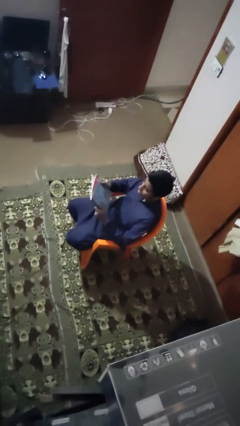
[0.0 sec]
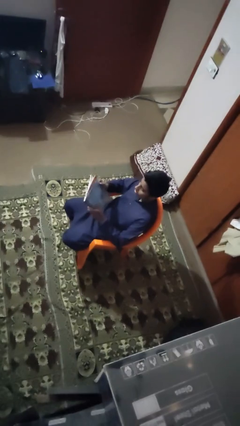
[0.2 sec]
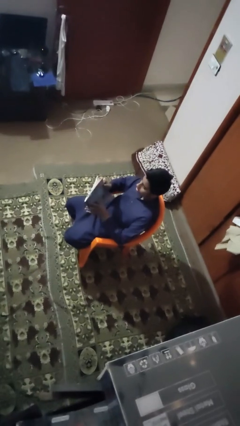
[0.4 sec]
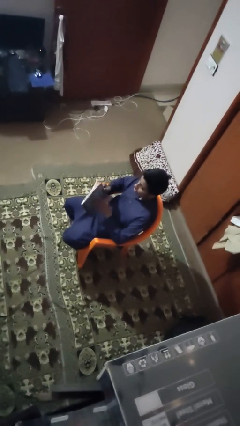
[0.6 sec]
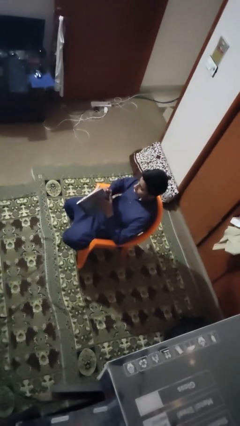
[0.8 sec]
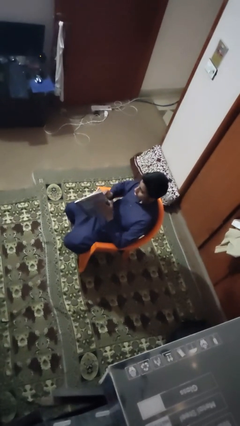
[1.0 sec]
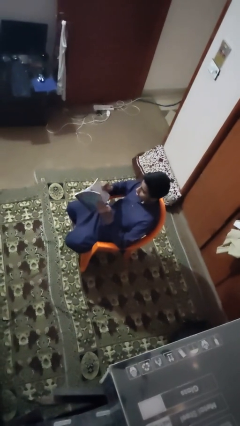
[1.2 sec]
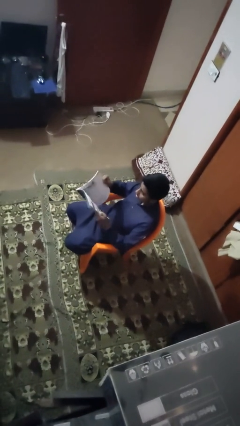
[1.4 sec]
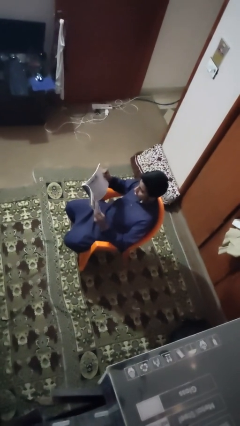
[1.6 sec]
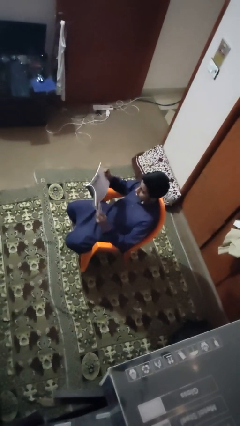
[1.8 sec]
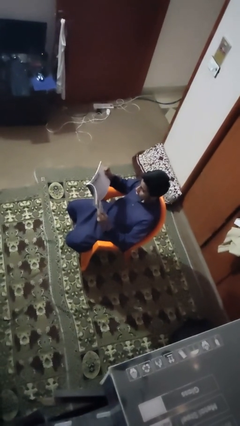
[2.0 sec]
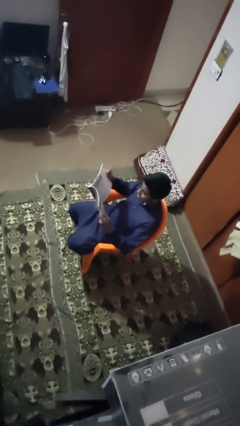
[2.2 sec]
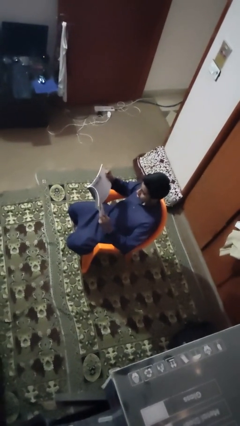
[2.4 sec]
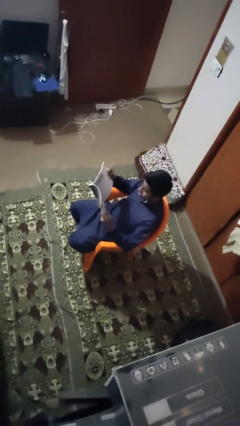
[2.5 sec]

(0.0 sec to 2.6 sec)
person reads book

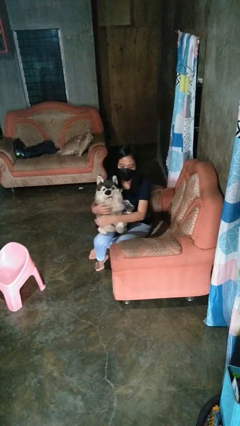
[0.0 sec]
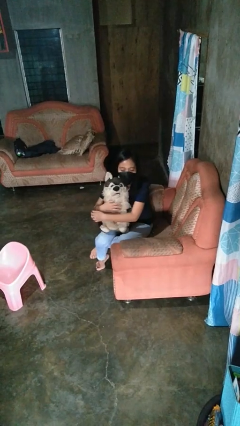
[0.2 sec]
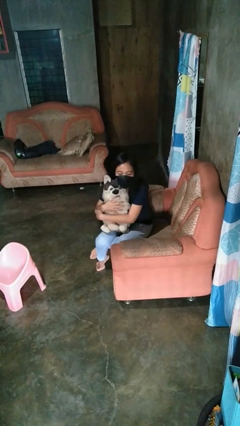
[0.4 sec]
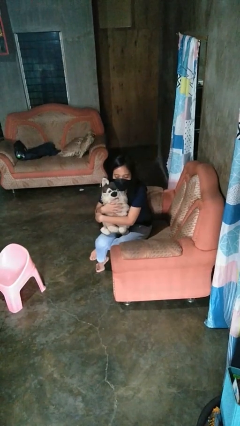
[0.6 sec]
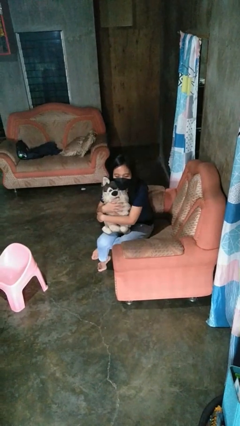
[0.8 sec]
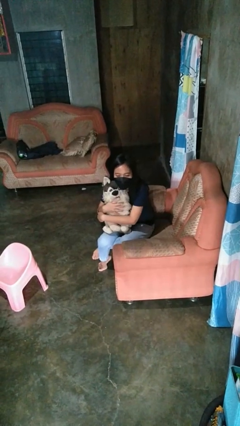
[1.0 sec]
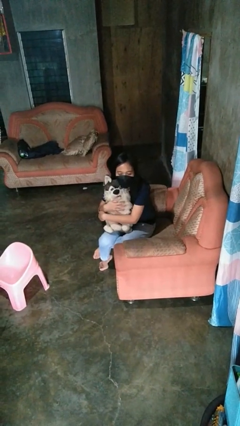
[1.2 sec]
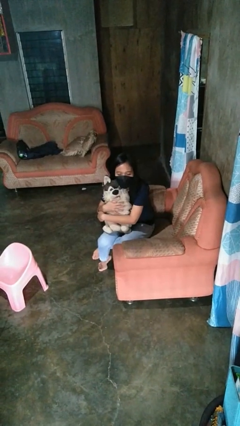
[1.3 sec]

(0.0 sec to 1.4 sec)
person hugs stuffed animal

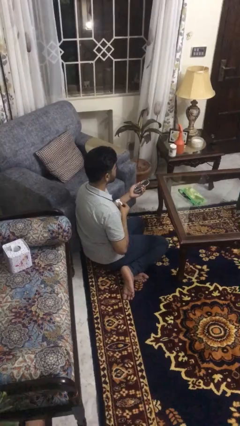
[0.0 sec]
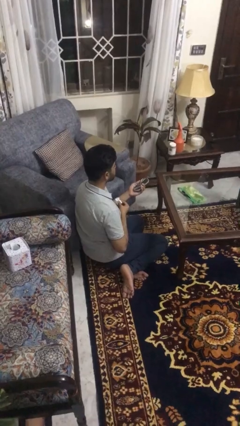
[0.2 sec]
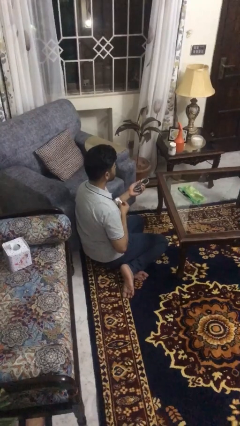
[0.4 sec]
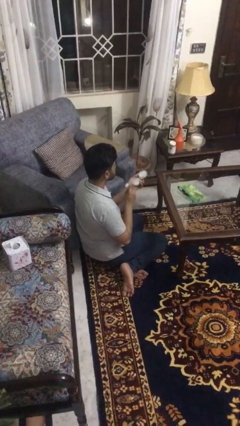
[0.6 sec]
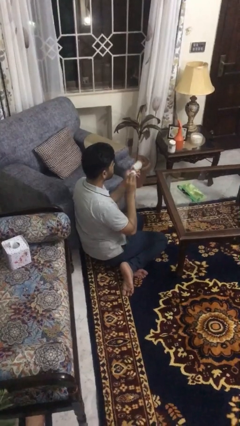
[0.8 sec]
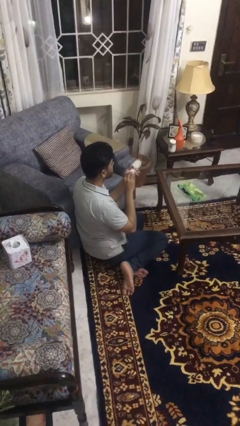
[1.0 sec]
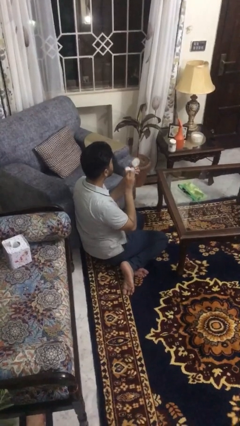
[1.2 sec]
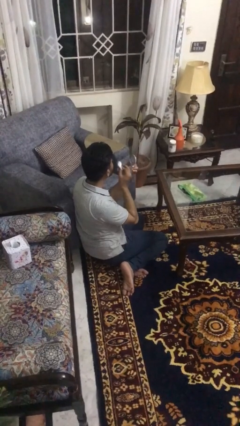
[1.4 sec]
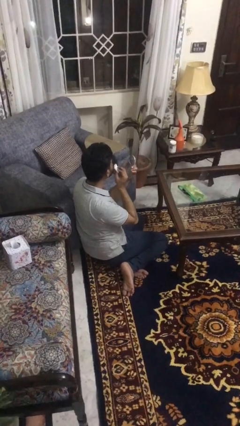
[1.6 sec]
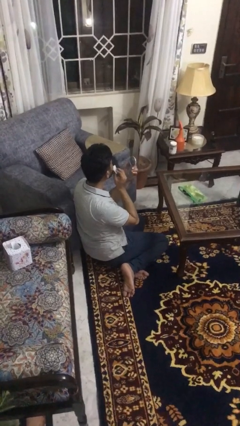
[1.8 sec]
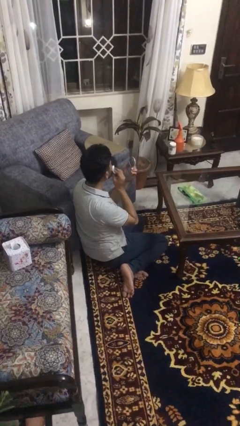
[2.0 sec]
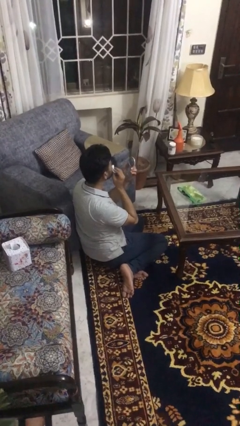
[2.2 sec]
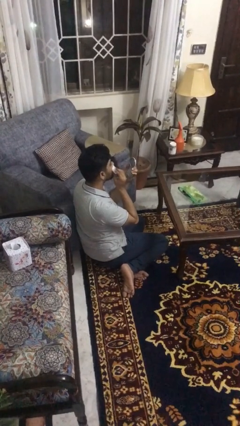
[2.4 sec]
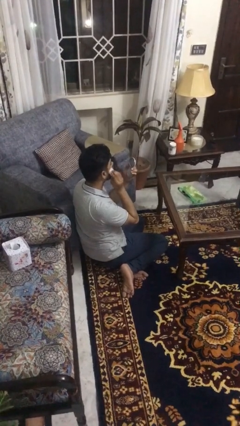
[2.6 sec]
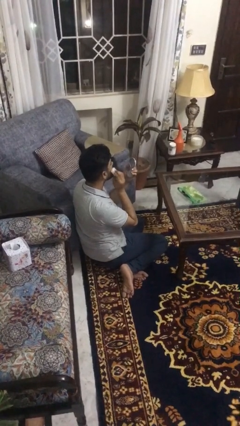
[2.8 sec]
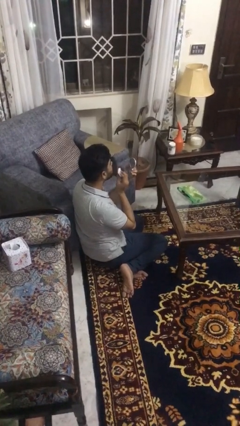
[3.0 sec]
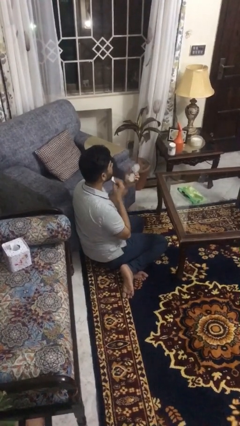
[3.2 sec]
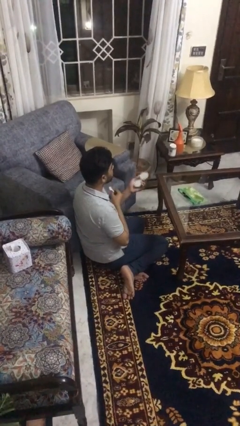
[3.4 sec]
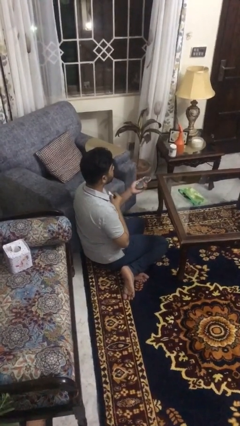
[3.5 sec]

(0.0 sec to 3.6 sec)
person applies foundation makeup

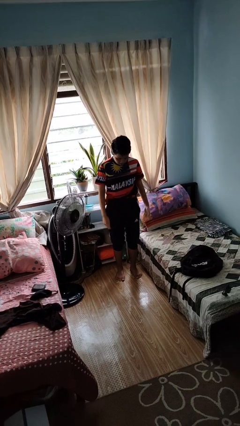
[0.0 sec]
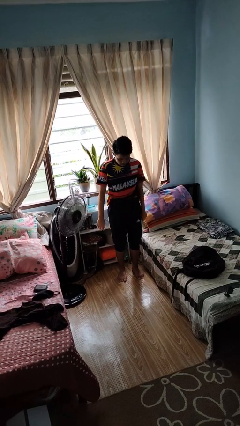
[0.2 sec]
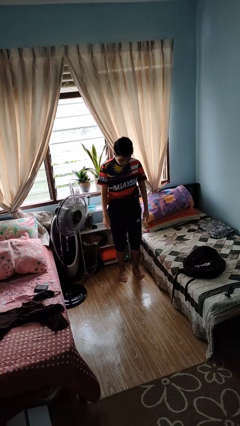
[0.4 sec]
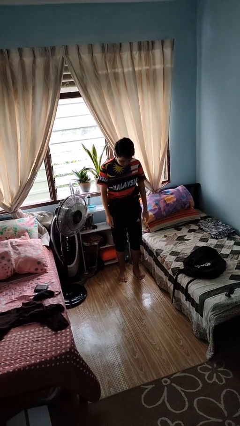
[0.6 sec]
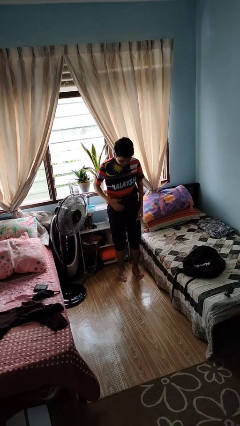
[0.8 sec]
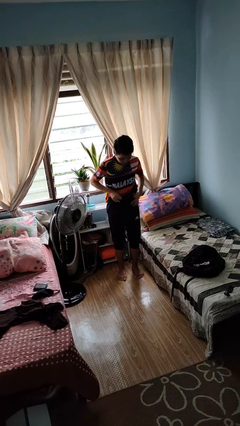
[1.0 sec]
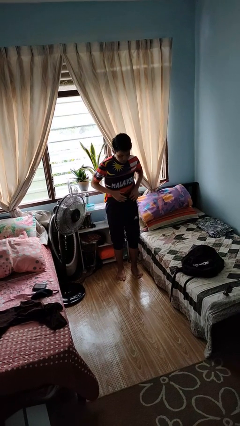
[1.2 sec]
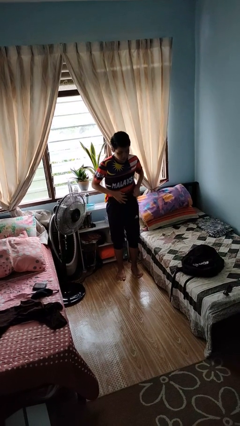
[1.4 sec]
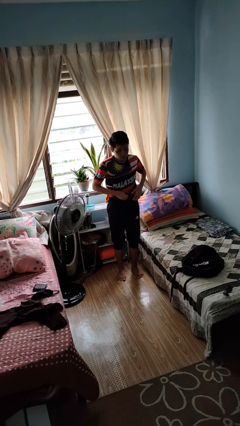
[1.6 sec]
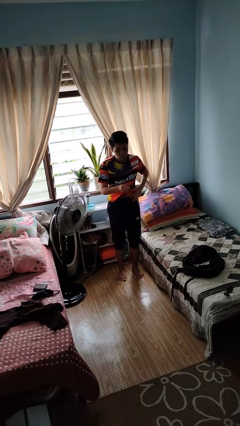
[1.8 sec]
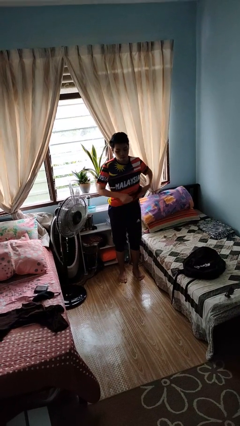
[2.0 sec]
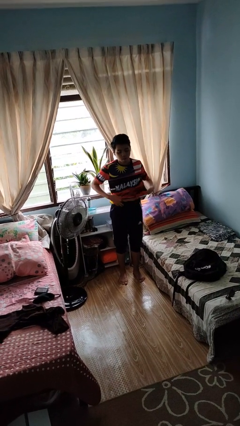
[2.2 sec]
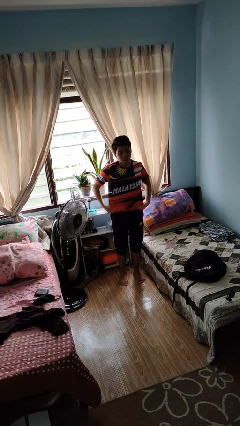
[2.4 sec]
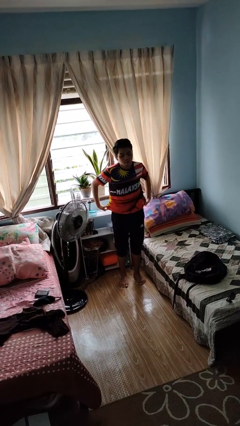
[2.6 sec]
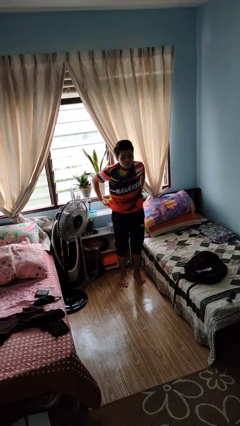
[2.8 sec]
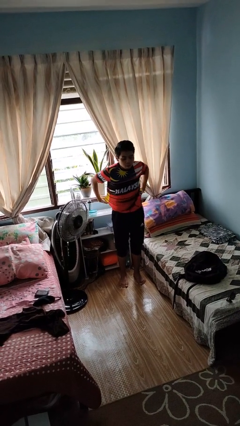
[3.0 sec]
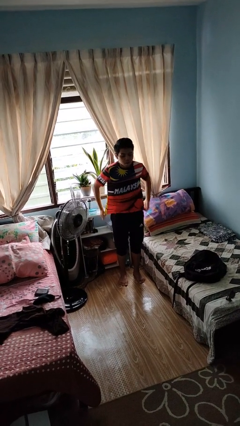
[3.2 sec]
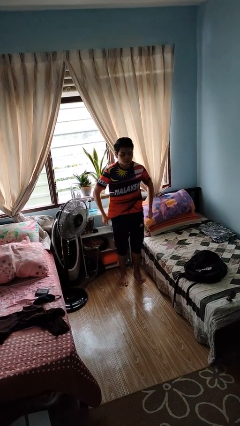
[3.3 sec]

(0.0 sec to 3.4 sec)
person untucks shirt

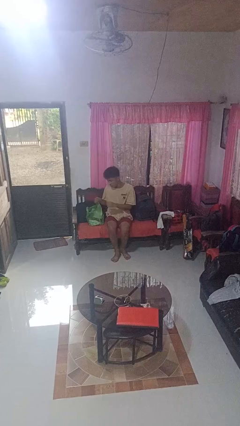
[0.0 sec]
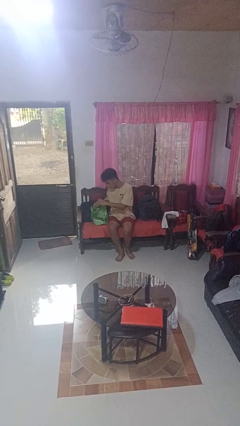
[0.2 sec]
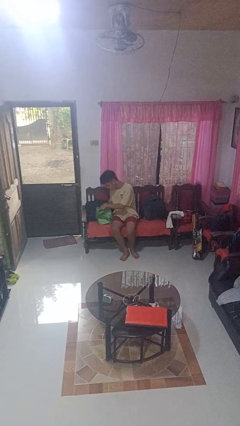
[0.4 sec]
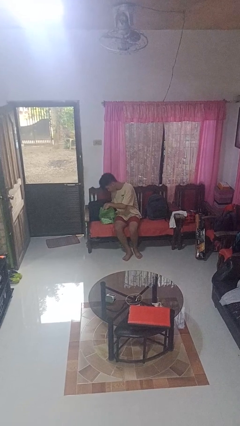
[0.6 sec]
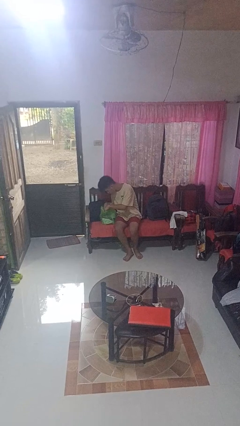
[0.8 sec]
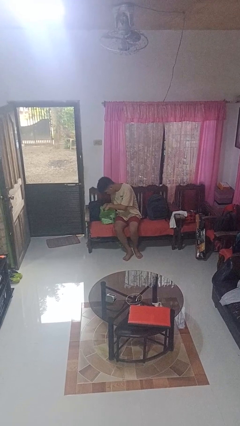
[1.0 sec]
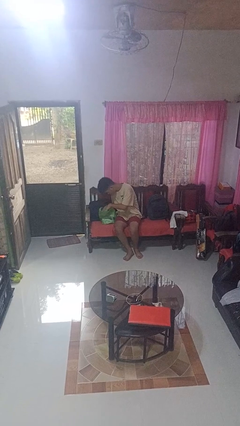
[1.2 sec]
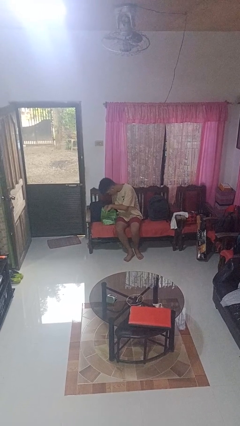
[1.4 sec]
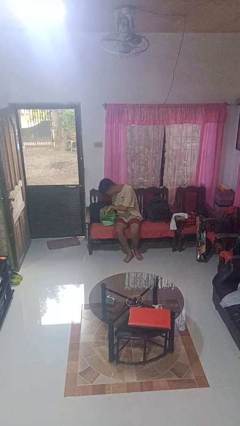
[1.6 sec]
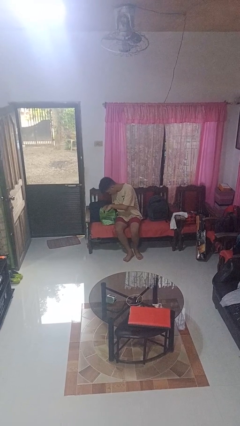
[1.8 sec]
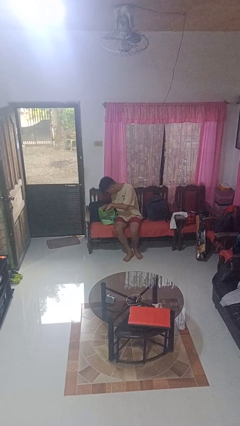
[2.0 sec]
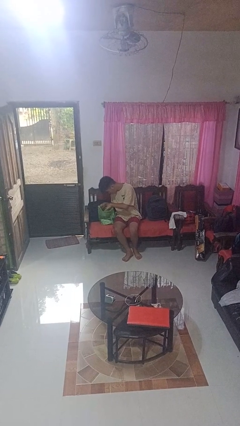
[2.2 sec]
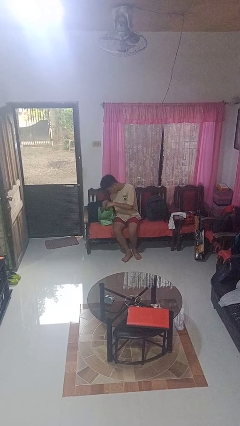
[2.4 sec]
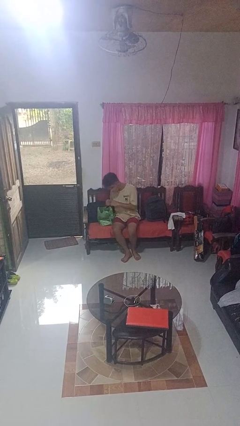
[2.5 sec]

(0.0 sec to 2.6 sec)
person searches in bag

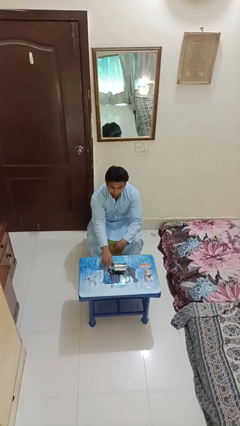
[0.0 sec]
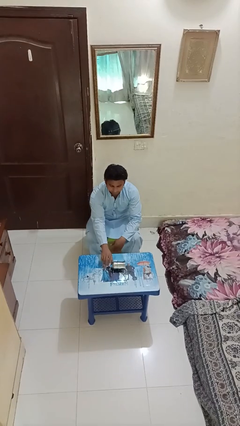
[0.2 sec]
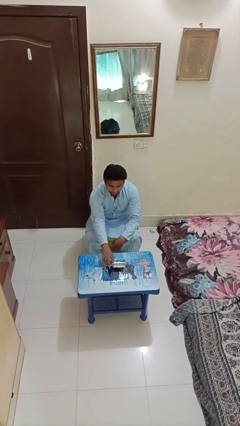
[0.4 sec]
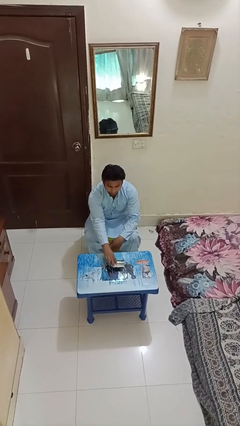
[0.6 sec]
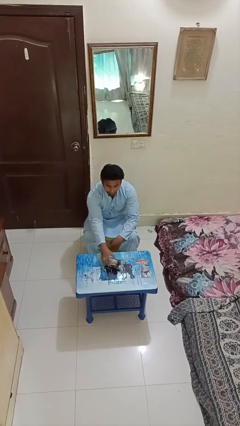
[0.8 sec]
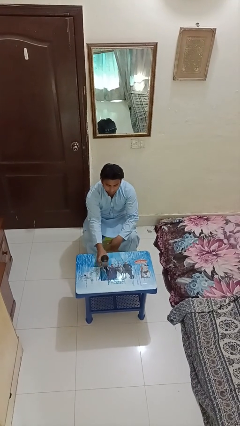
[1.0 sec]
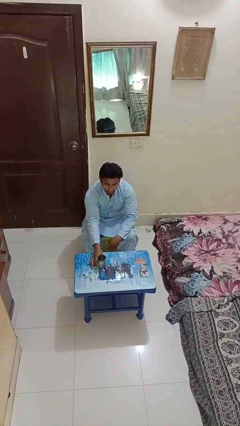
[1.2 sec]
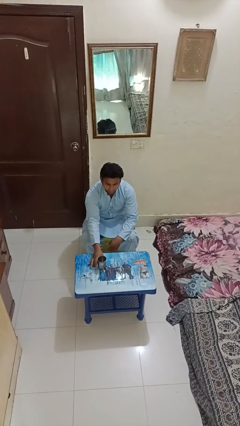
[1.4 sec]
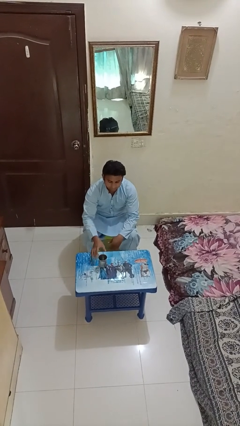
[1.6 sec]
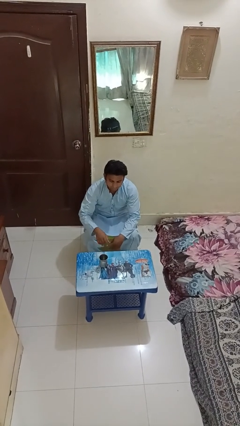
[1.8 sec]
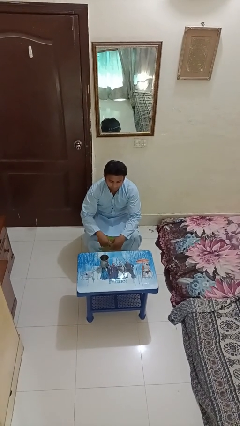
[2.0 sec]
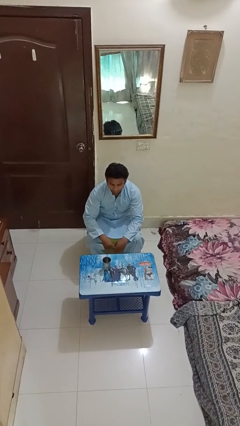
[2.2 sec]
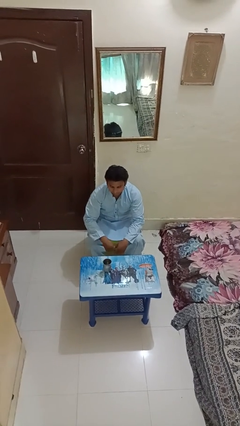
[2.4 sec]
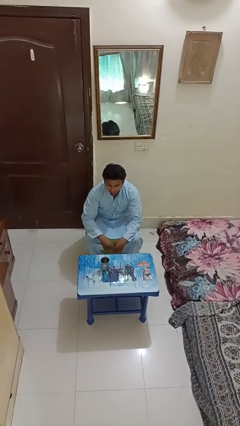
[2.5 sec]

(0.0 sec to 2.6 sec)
person sets upright glass

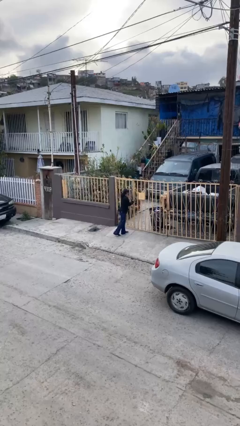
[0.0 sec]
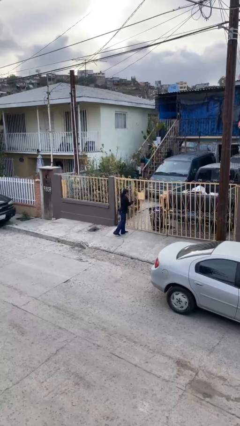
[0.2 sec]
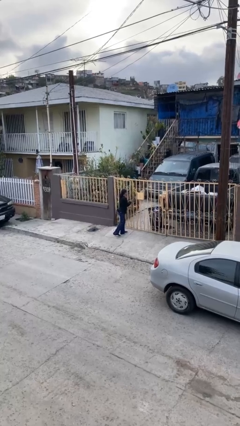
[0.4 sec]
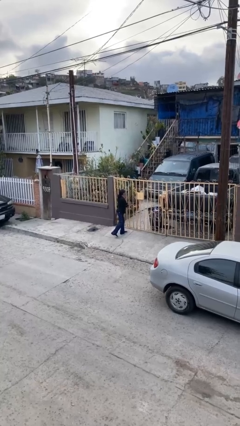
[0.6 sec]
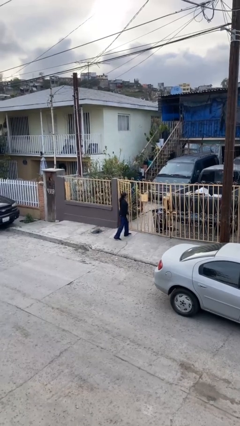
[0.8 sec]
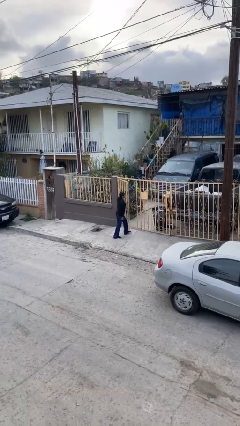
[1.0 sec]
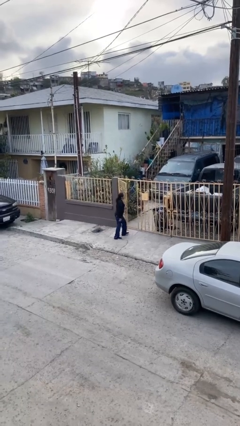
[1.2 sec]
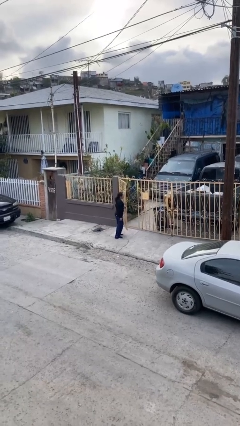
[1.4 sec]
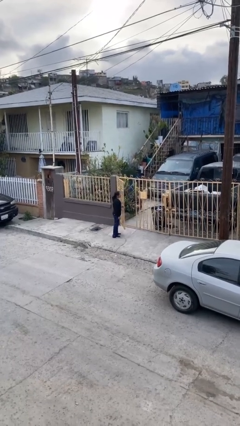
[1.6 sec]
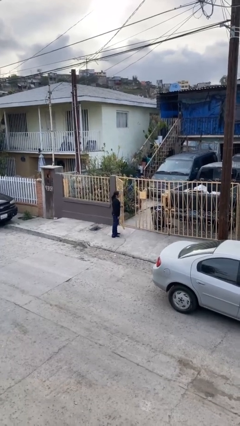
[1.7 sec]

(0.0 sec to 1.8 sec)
person opens facility door
